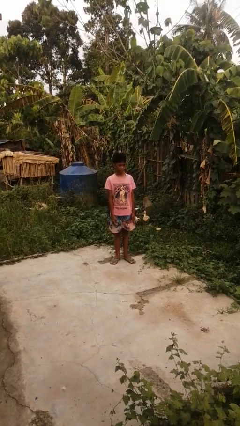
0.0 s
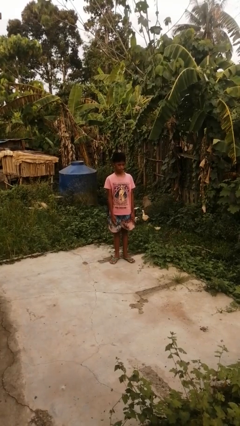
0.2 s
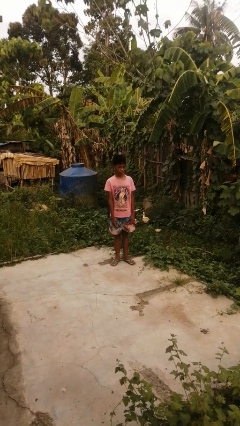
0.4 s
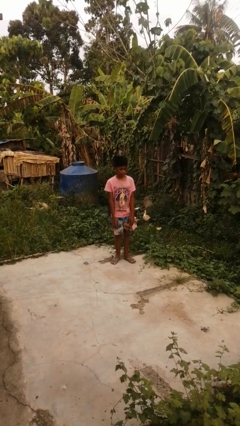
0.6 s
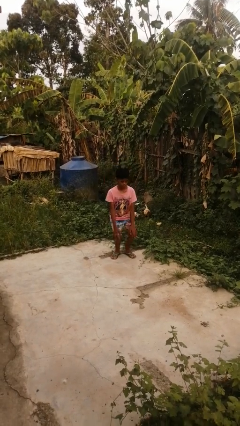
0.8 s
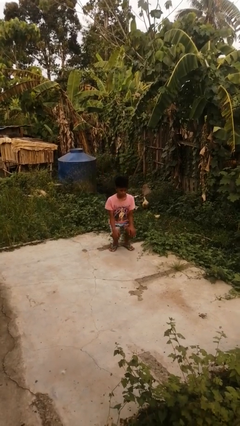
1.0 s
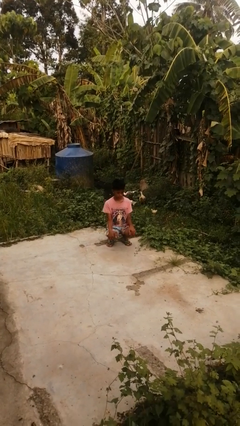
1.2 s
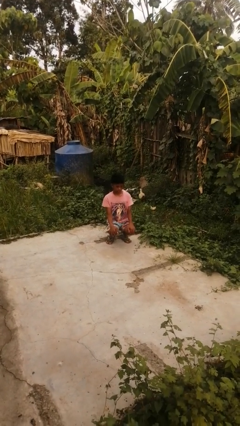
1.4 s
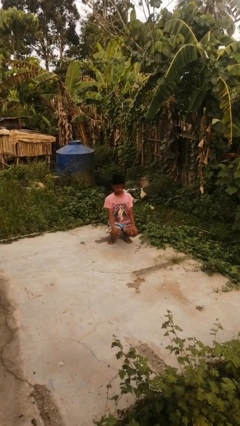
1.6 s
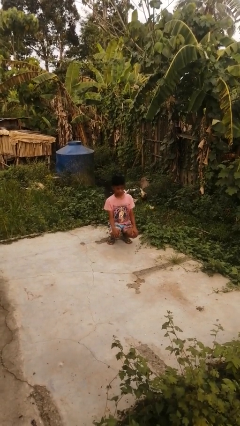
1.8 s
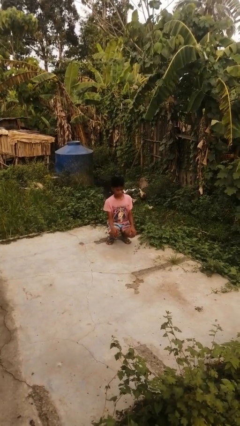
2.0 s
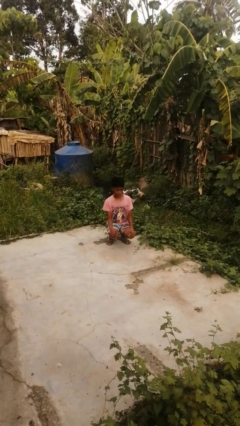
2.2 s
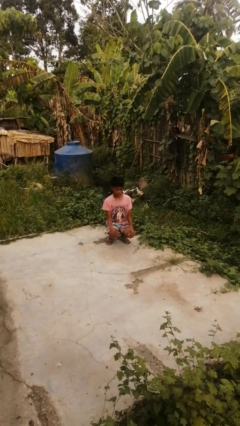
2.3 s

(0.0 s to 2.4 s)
person squats

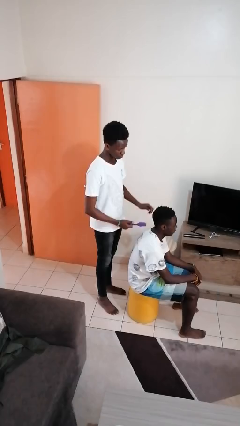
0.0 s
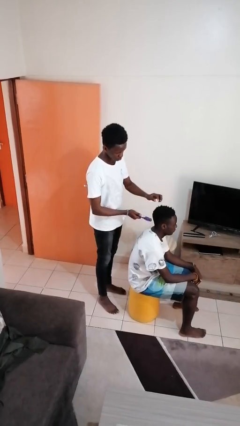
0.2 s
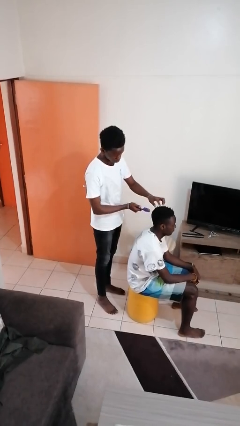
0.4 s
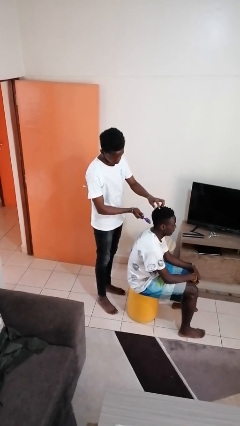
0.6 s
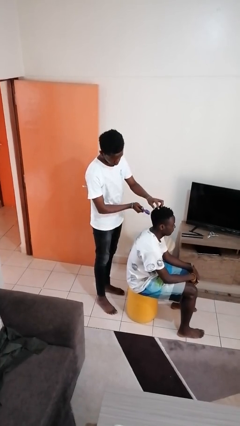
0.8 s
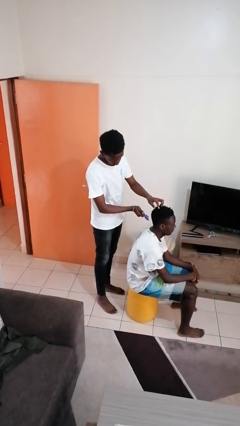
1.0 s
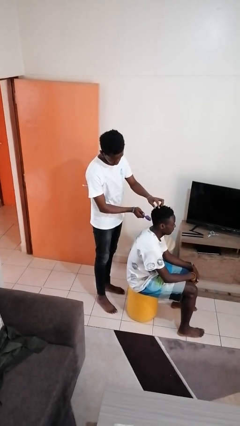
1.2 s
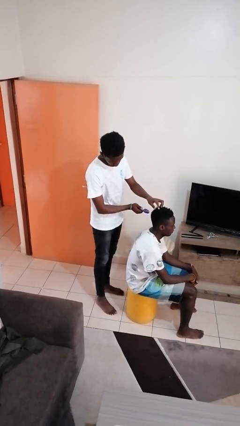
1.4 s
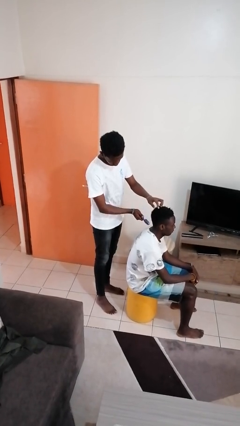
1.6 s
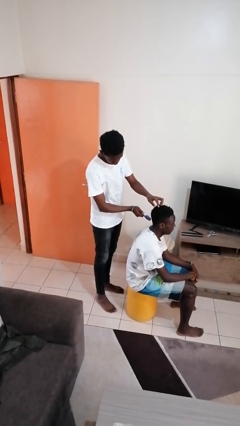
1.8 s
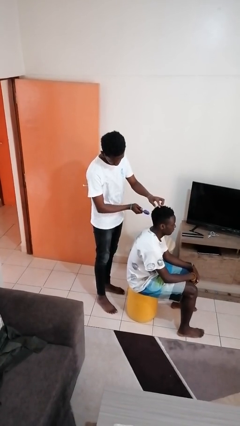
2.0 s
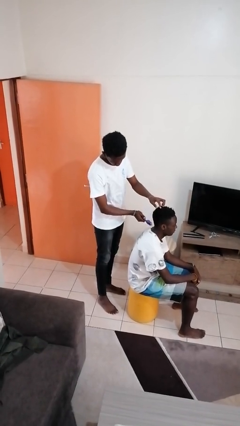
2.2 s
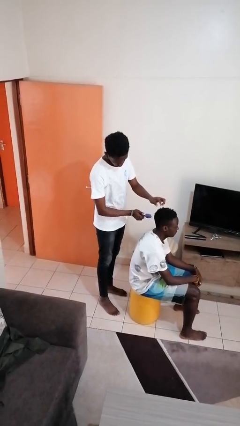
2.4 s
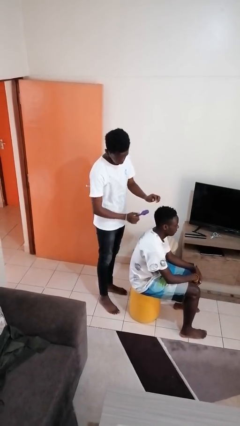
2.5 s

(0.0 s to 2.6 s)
person brushes hair of person

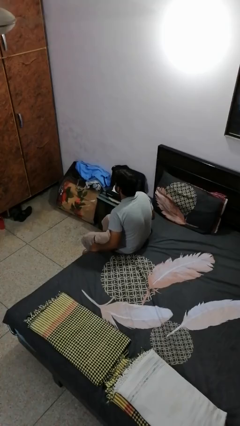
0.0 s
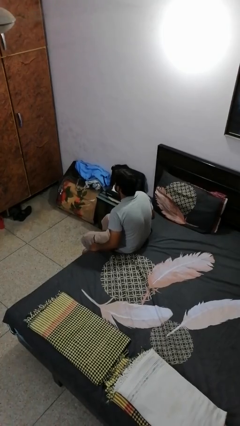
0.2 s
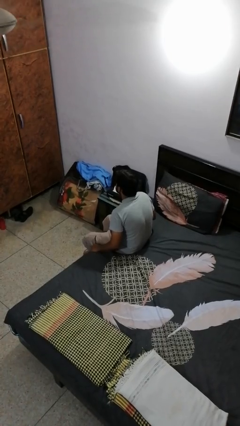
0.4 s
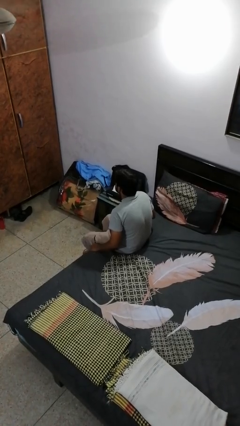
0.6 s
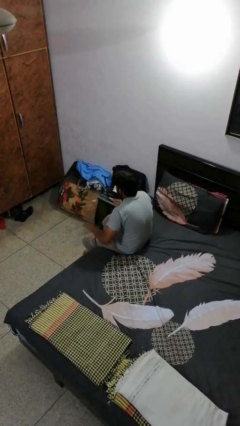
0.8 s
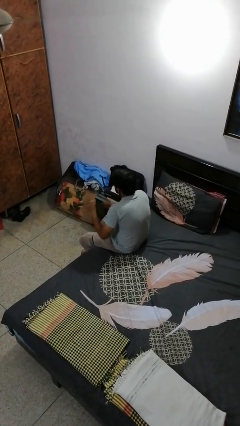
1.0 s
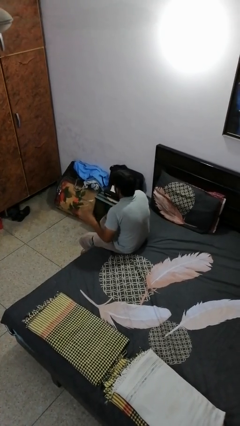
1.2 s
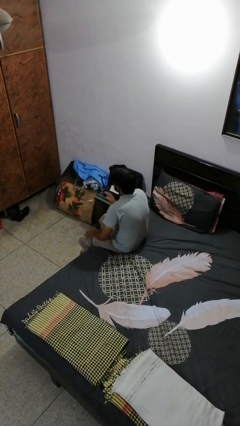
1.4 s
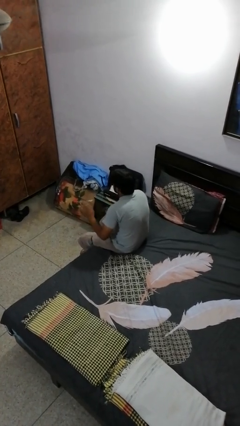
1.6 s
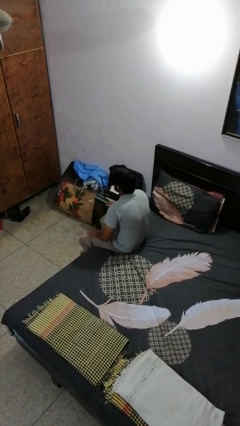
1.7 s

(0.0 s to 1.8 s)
person slaps hands on thighs

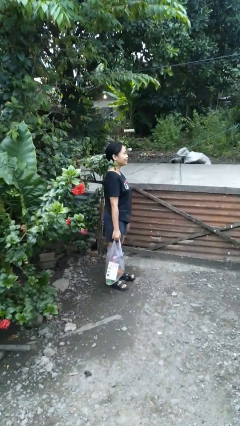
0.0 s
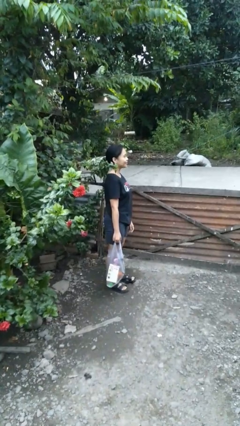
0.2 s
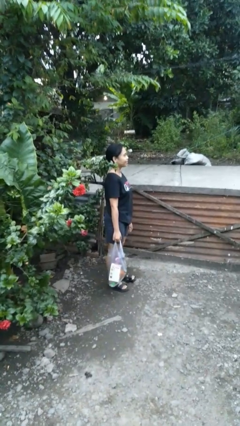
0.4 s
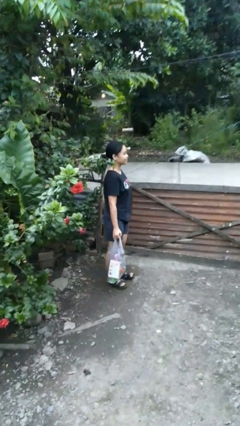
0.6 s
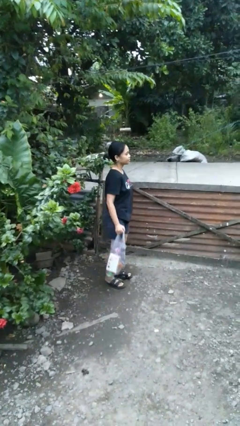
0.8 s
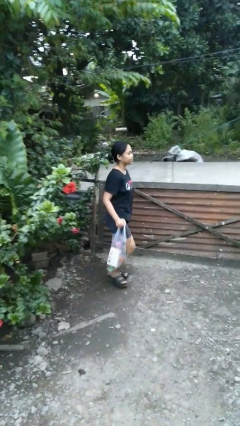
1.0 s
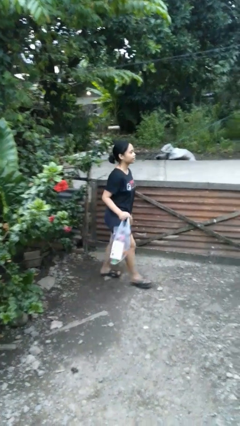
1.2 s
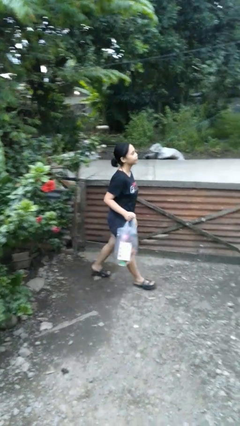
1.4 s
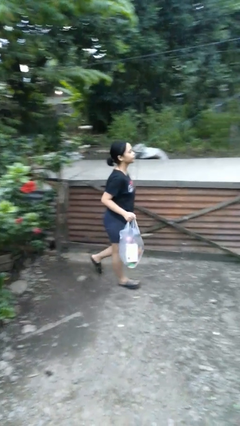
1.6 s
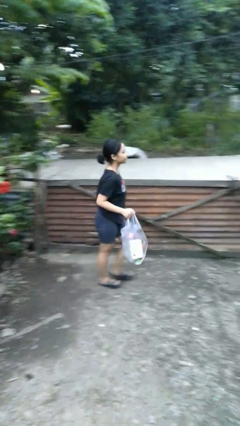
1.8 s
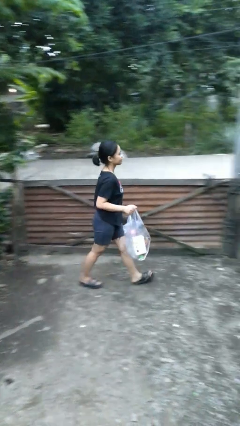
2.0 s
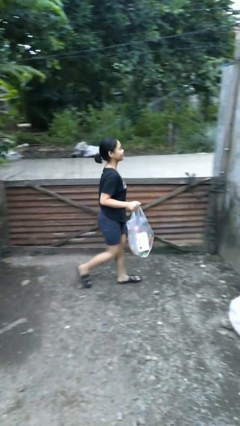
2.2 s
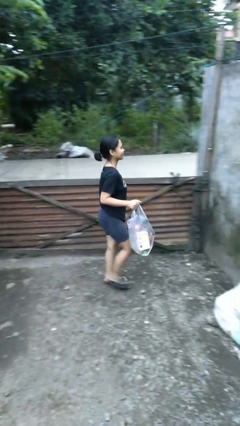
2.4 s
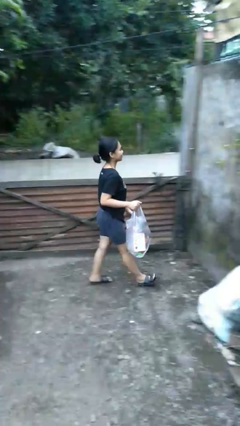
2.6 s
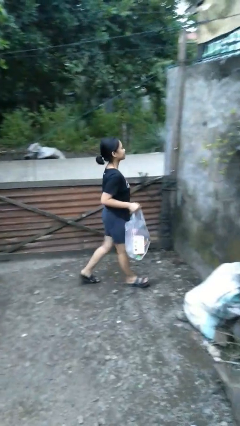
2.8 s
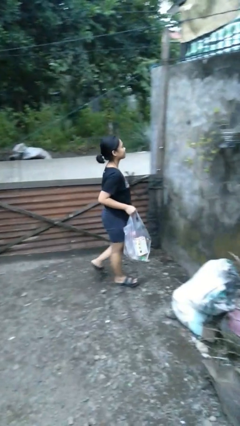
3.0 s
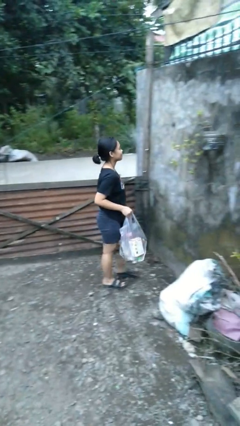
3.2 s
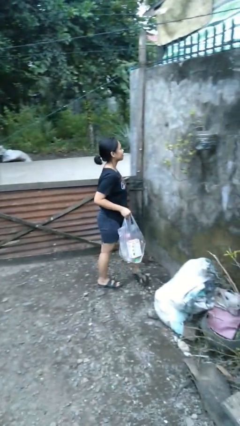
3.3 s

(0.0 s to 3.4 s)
person carries groceries

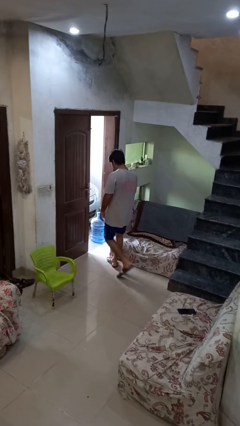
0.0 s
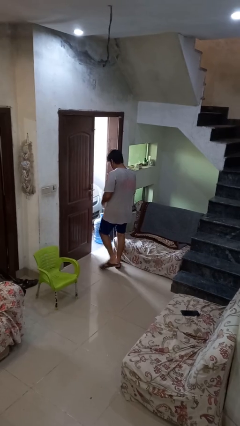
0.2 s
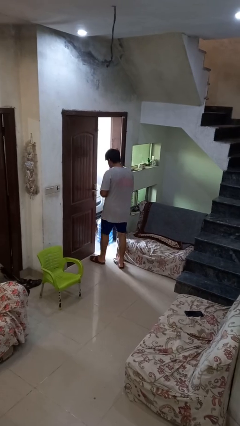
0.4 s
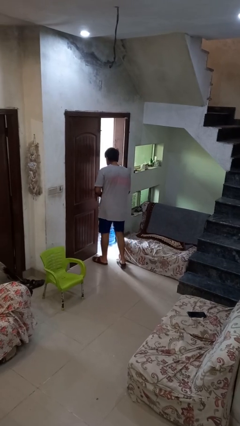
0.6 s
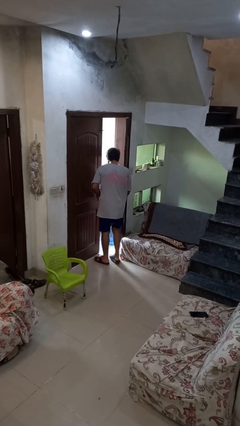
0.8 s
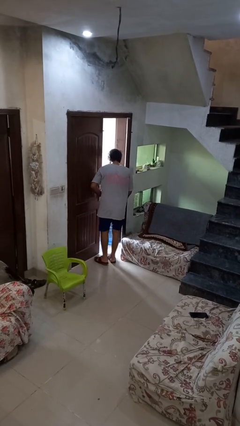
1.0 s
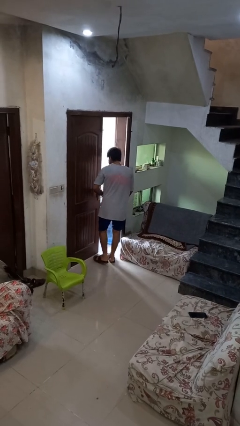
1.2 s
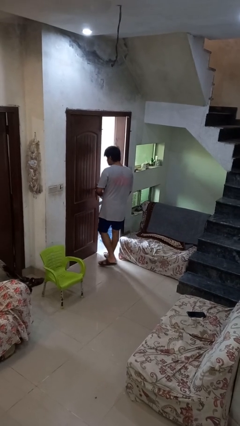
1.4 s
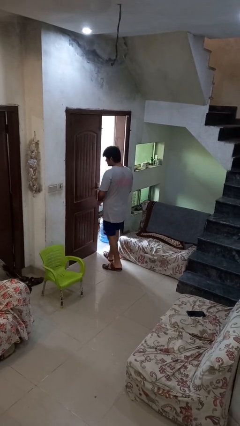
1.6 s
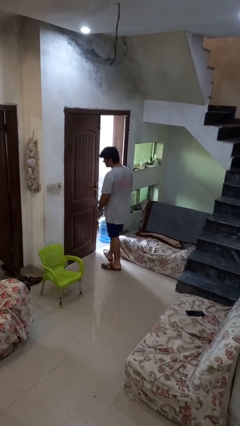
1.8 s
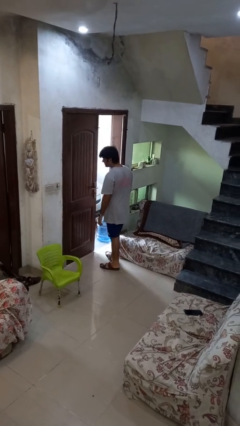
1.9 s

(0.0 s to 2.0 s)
person bumps into wall

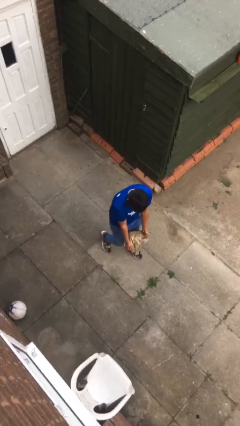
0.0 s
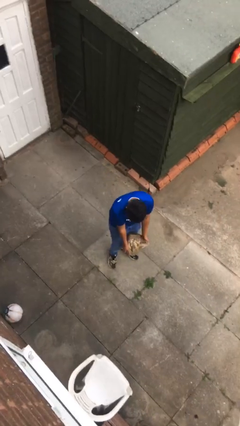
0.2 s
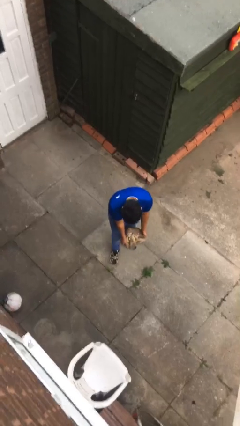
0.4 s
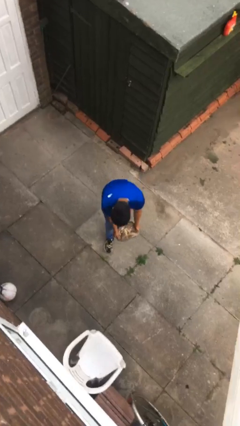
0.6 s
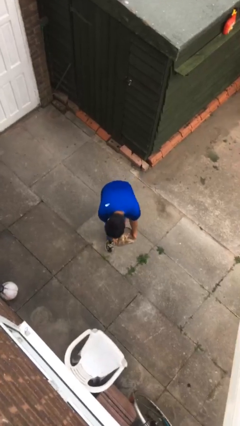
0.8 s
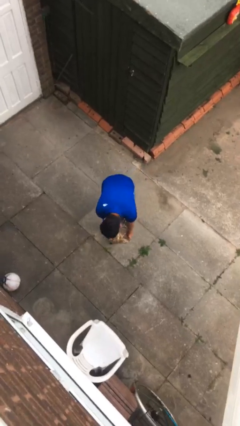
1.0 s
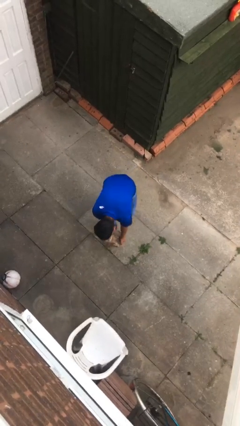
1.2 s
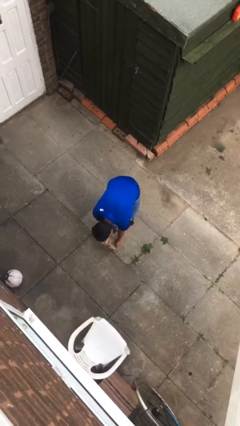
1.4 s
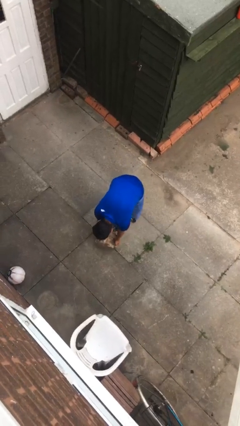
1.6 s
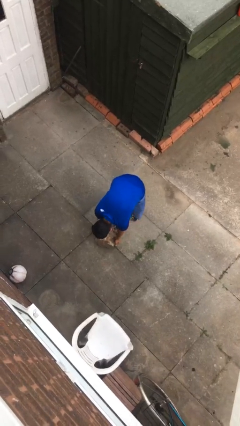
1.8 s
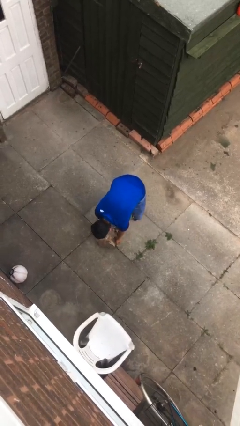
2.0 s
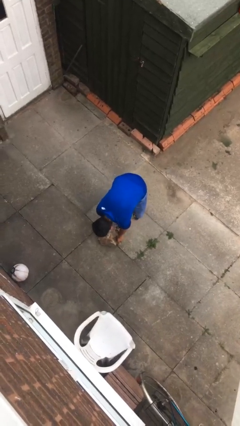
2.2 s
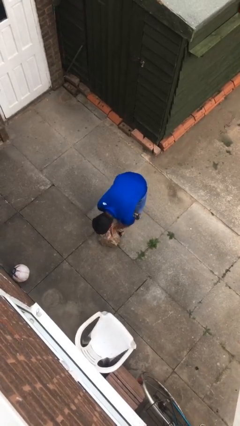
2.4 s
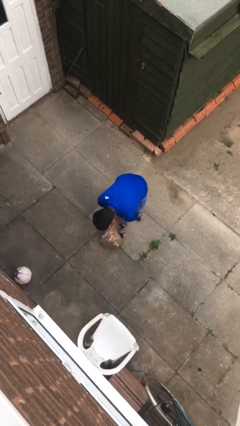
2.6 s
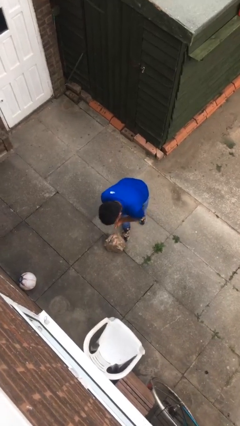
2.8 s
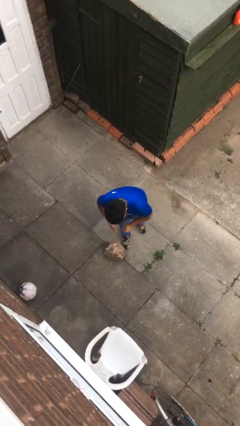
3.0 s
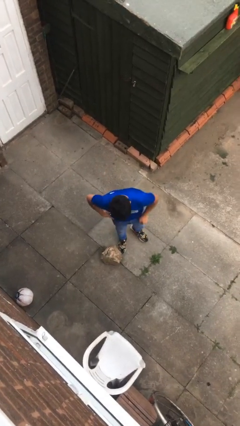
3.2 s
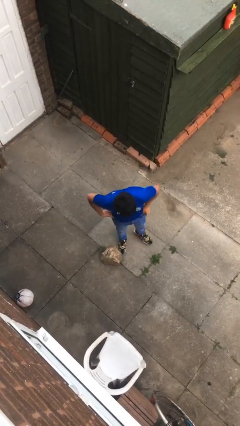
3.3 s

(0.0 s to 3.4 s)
person puts down object on floor

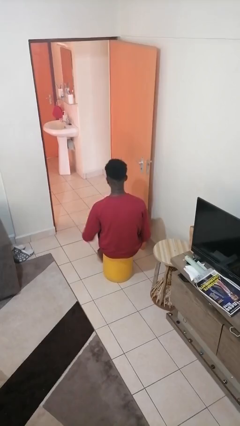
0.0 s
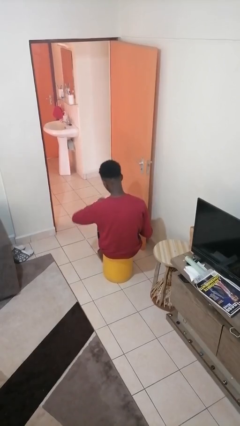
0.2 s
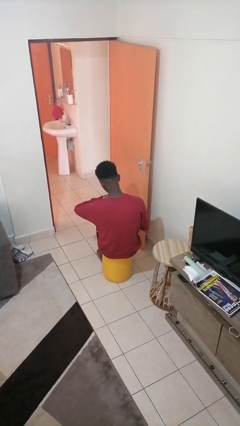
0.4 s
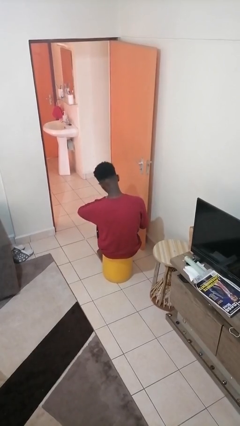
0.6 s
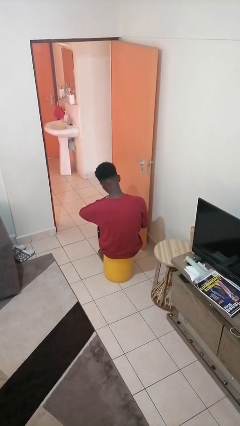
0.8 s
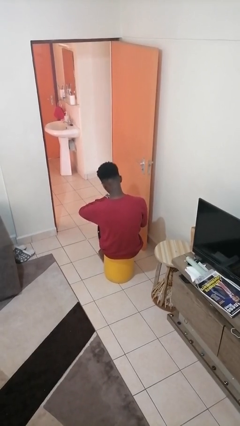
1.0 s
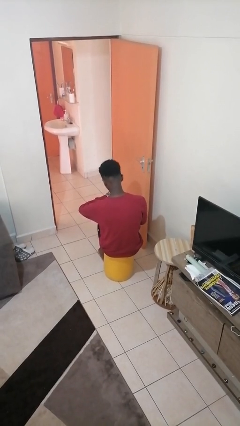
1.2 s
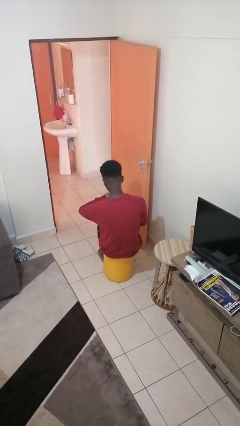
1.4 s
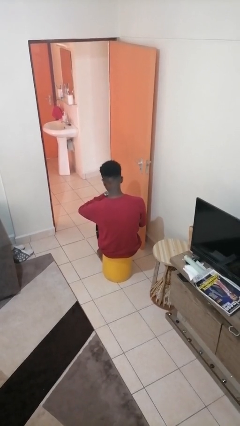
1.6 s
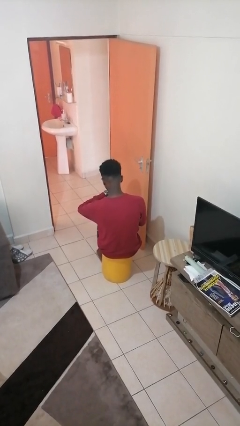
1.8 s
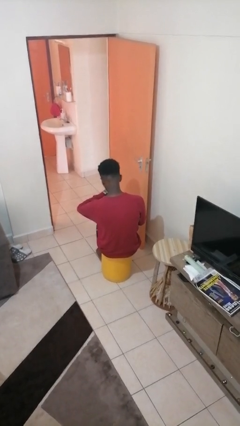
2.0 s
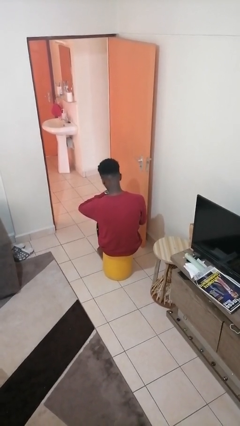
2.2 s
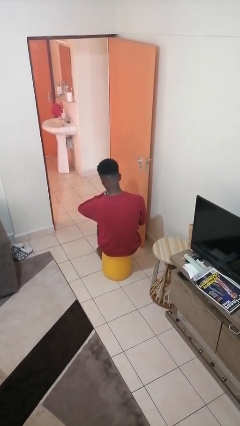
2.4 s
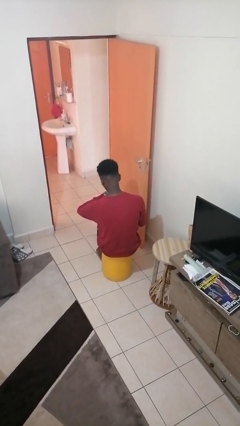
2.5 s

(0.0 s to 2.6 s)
person looks at wristwatch
